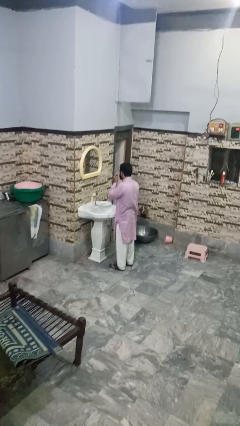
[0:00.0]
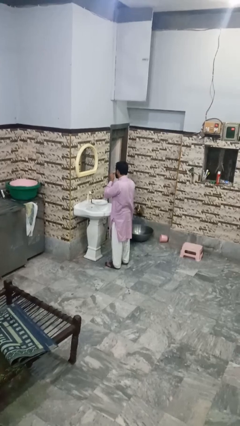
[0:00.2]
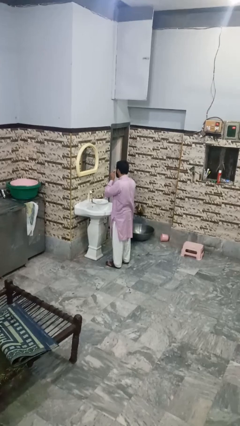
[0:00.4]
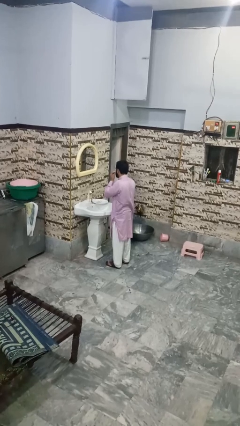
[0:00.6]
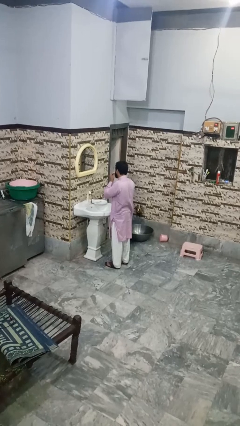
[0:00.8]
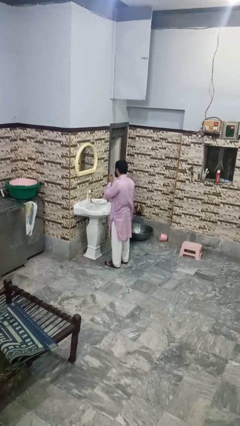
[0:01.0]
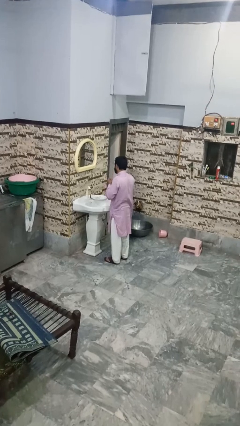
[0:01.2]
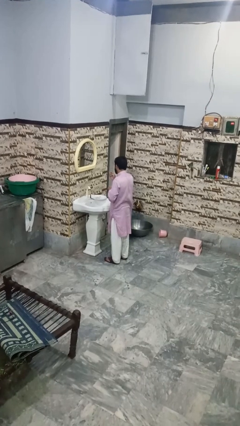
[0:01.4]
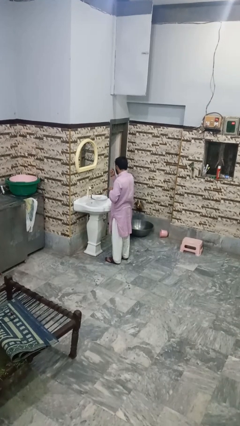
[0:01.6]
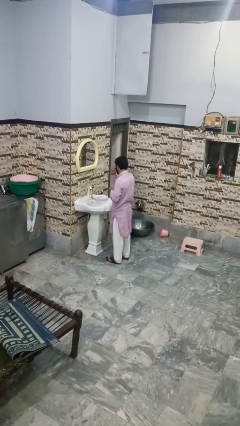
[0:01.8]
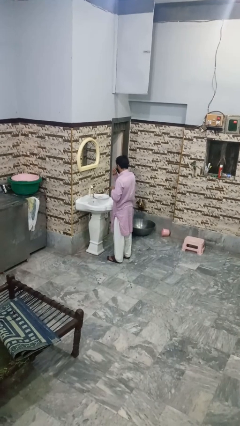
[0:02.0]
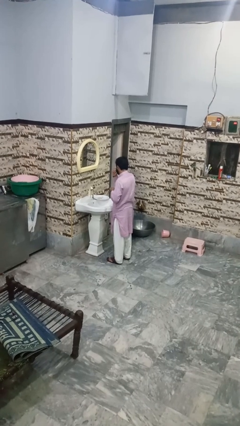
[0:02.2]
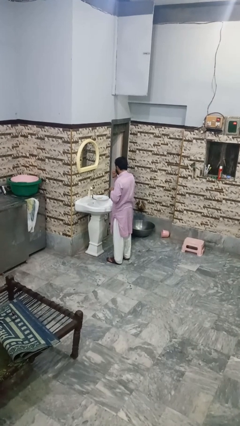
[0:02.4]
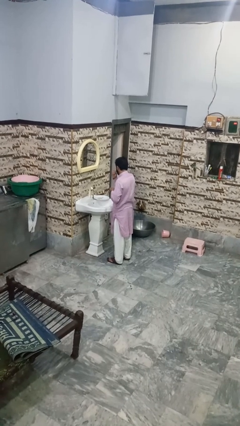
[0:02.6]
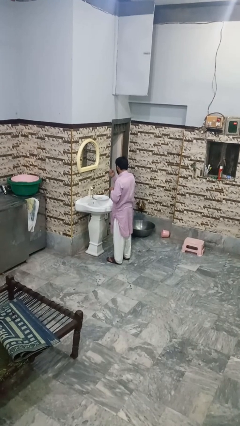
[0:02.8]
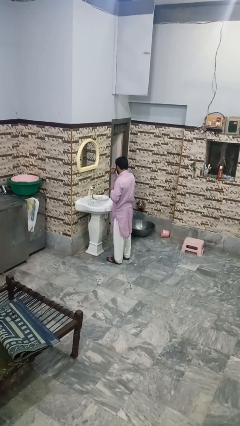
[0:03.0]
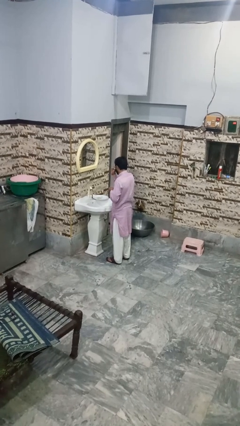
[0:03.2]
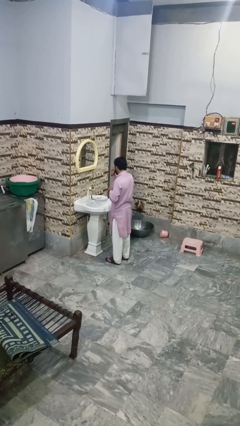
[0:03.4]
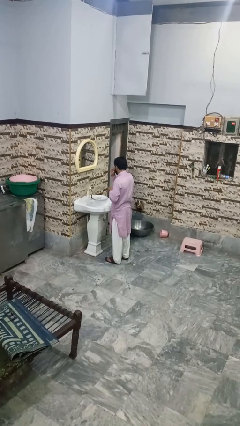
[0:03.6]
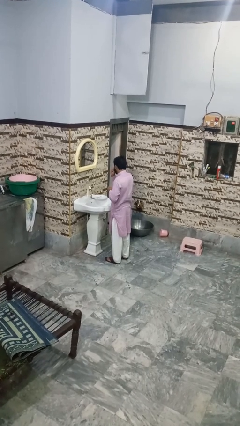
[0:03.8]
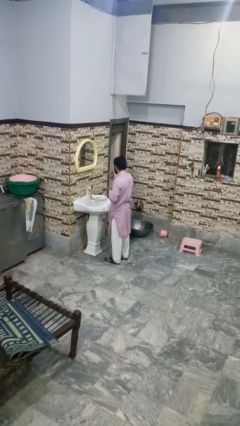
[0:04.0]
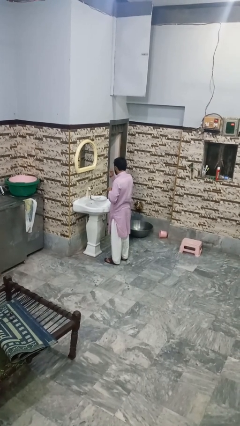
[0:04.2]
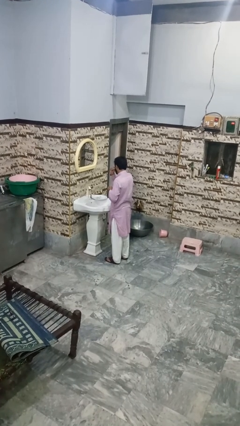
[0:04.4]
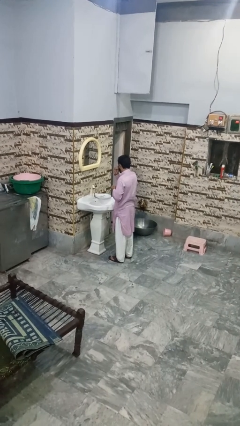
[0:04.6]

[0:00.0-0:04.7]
person shaves face

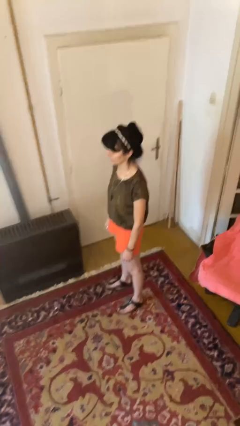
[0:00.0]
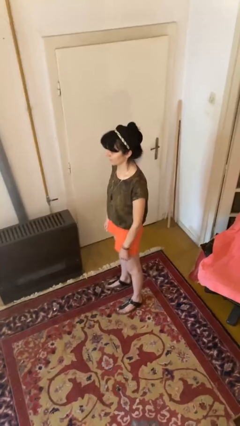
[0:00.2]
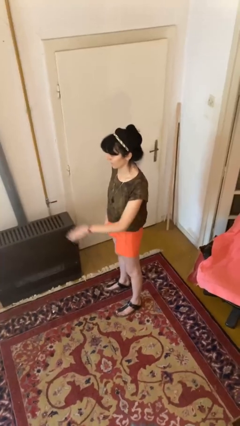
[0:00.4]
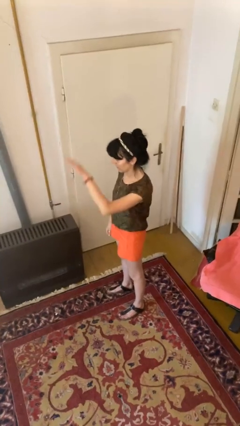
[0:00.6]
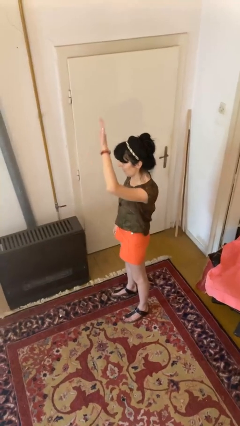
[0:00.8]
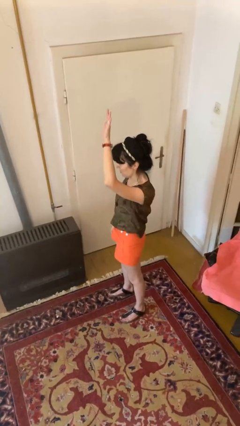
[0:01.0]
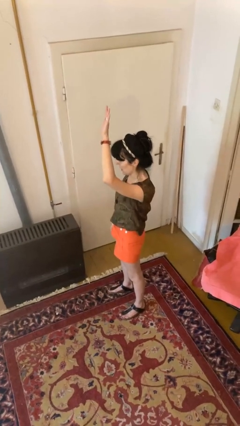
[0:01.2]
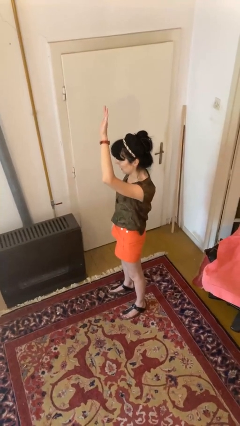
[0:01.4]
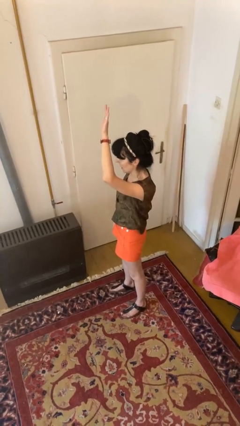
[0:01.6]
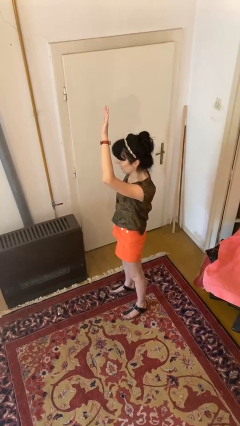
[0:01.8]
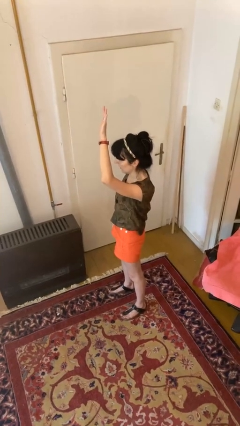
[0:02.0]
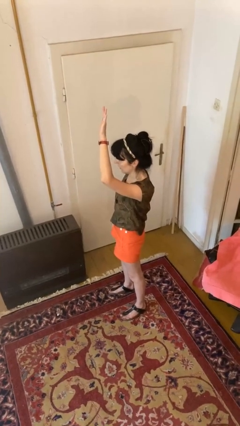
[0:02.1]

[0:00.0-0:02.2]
person gestures raise hand

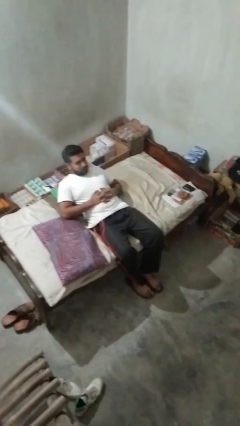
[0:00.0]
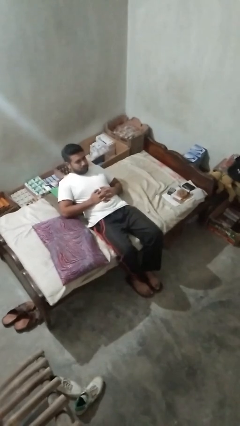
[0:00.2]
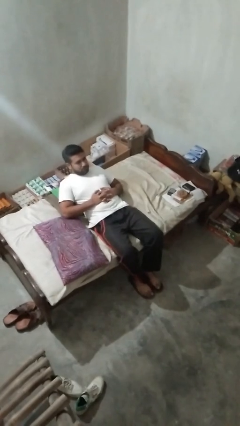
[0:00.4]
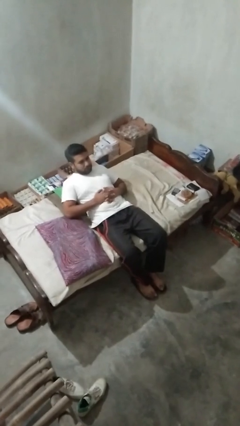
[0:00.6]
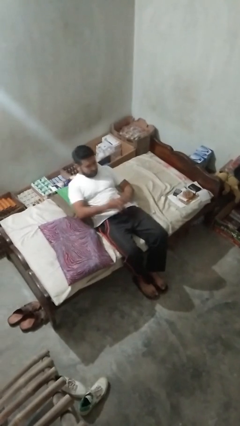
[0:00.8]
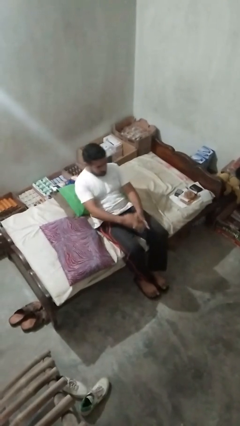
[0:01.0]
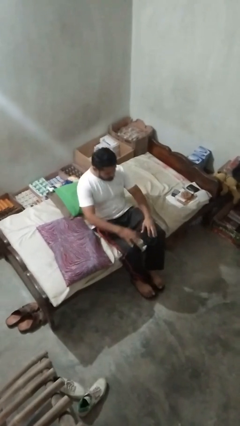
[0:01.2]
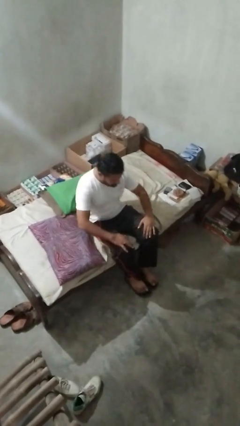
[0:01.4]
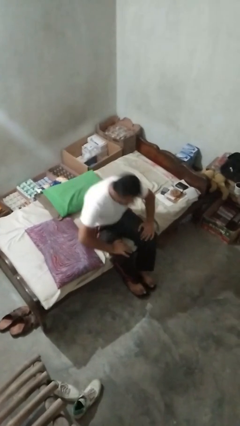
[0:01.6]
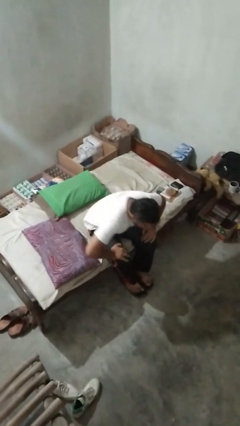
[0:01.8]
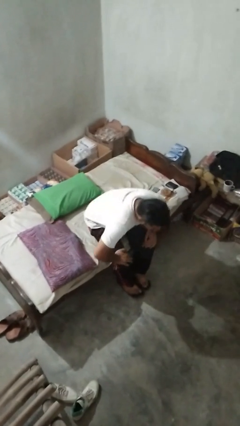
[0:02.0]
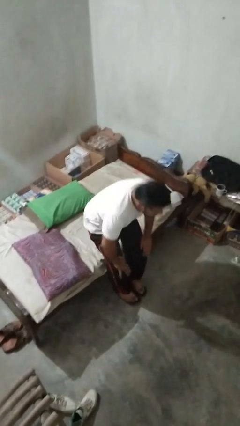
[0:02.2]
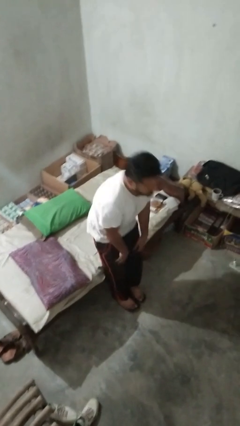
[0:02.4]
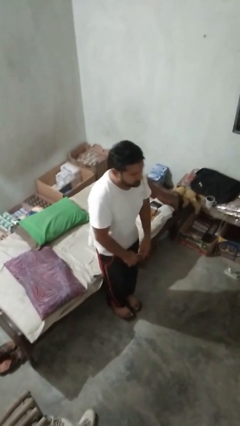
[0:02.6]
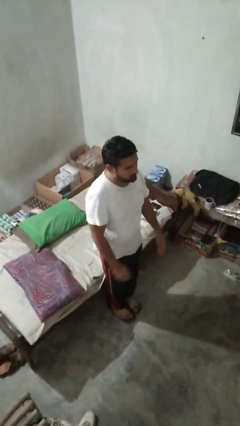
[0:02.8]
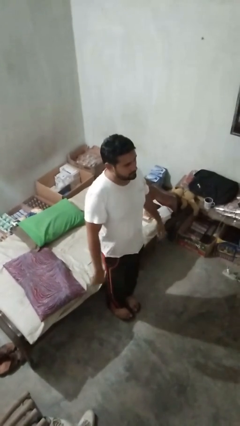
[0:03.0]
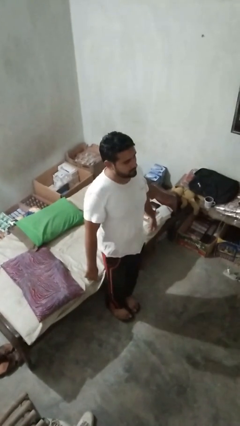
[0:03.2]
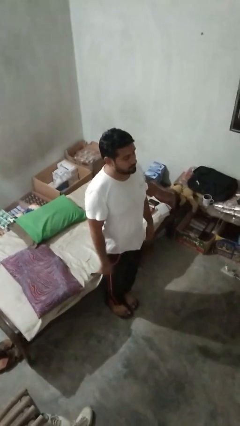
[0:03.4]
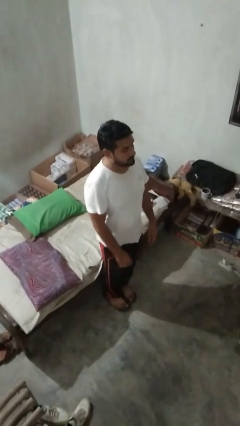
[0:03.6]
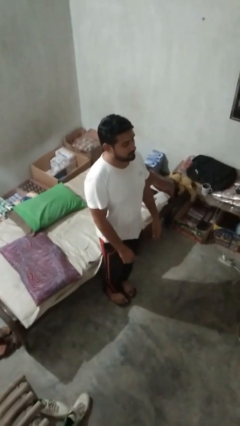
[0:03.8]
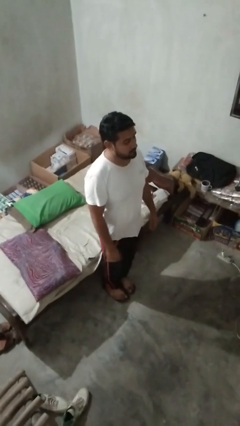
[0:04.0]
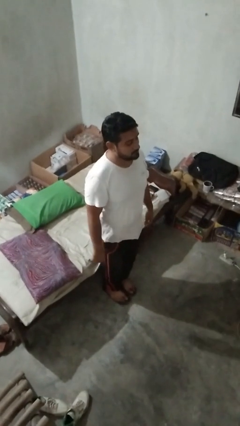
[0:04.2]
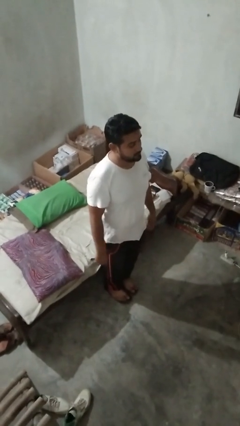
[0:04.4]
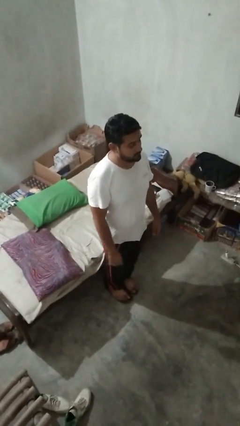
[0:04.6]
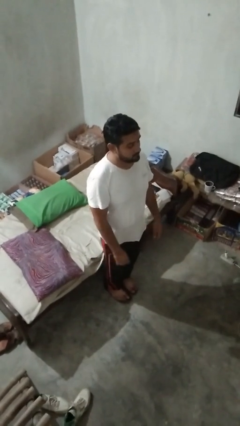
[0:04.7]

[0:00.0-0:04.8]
person stands up

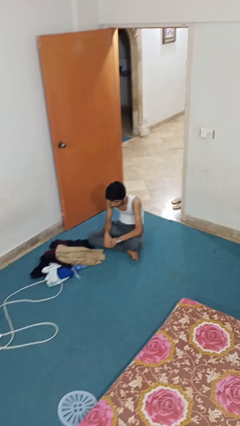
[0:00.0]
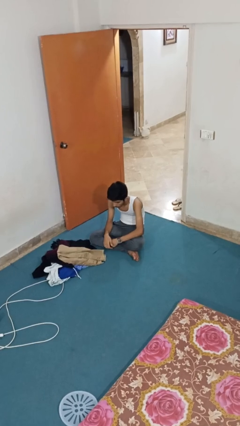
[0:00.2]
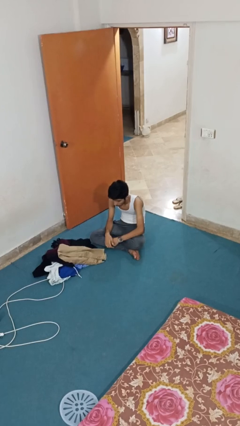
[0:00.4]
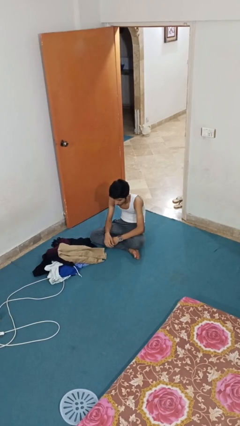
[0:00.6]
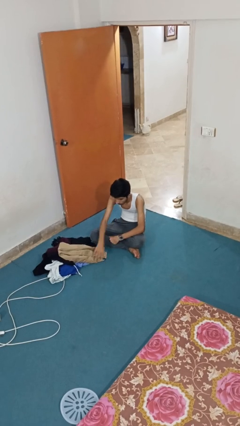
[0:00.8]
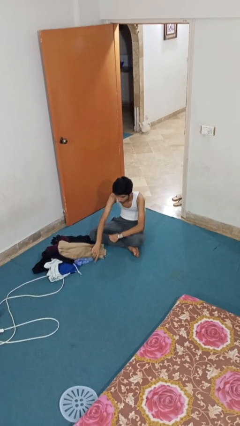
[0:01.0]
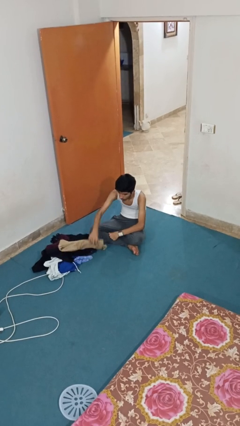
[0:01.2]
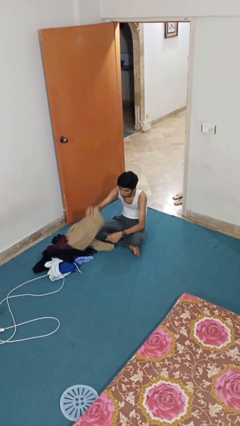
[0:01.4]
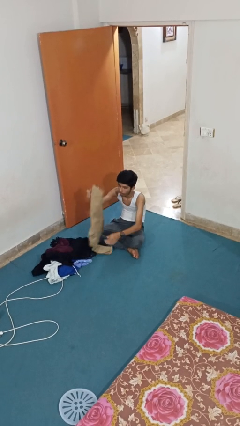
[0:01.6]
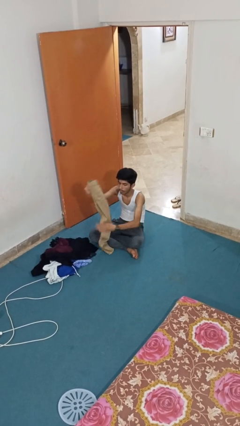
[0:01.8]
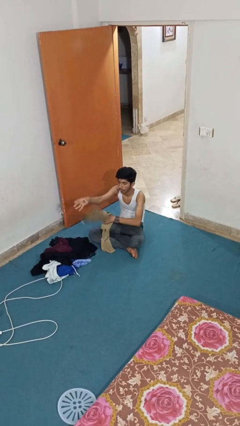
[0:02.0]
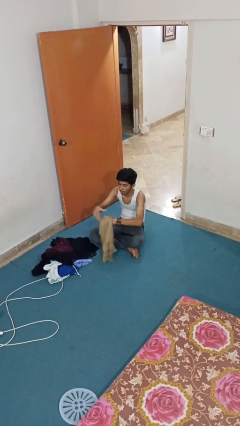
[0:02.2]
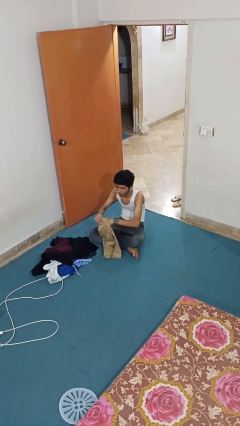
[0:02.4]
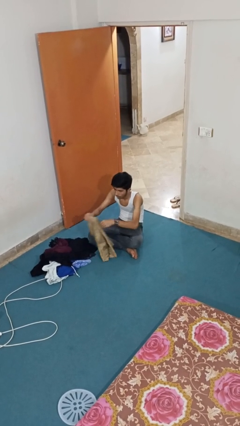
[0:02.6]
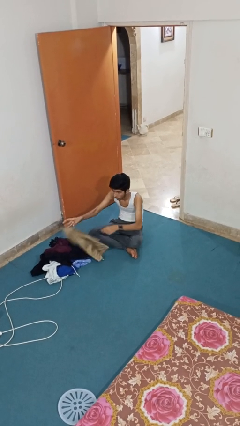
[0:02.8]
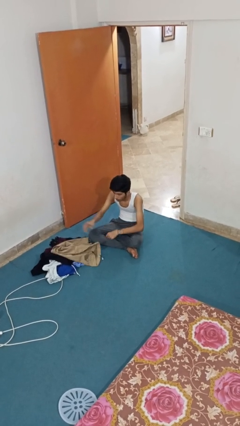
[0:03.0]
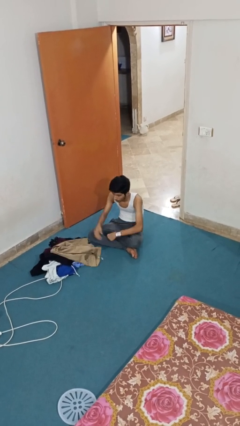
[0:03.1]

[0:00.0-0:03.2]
person folds pants

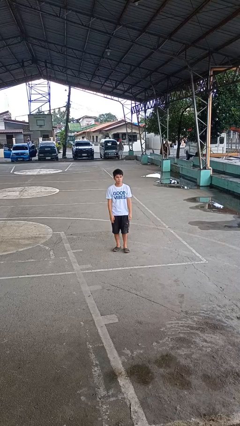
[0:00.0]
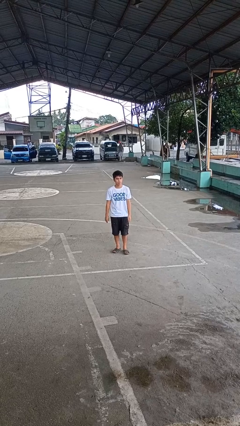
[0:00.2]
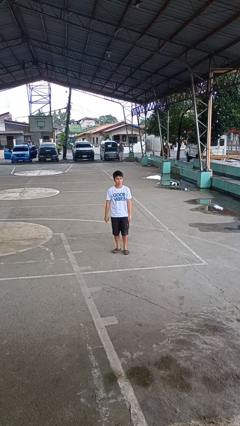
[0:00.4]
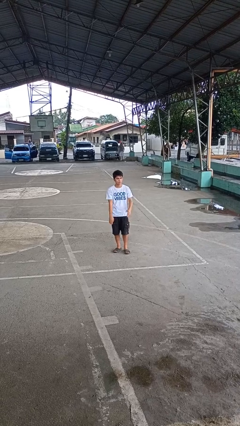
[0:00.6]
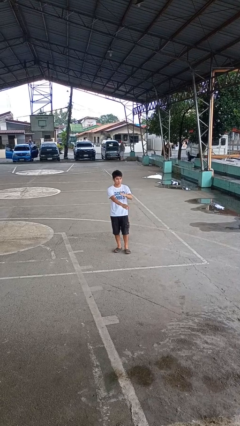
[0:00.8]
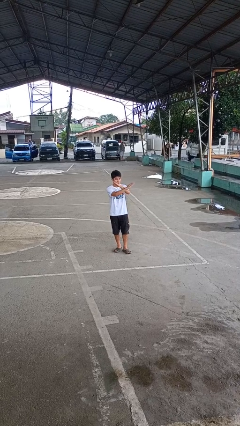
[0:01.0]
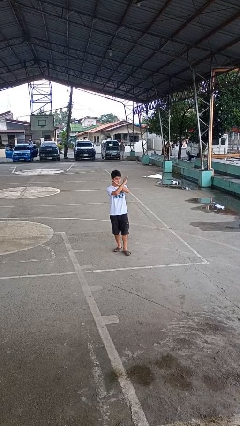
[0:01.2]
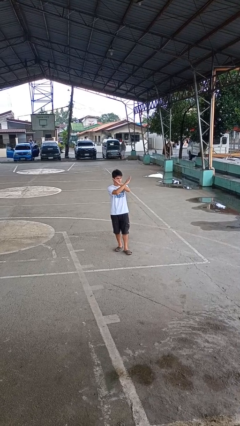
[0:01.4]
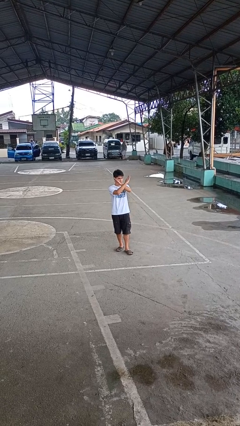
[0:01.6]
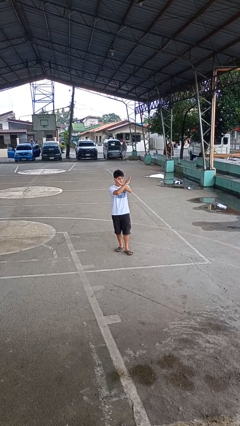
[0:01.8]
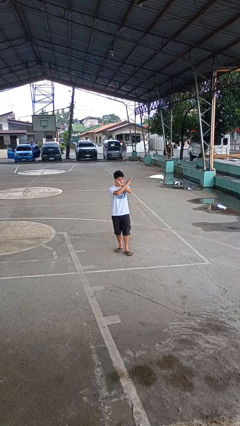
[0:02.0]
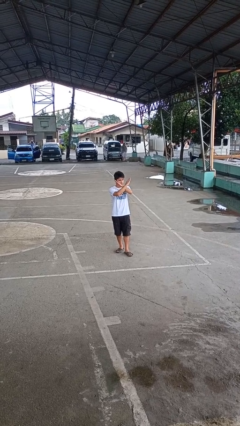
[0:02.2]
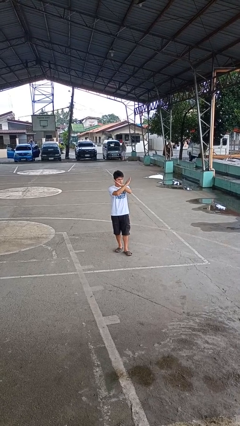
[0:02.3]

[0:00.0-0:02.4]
person gestures arms x

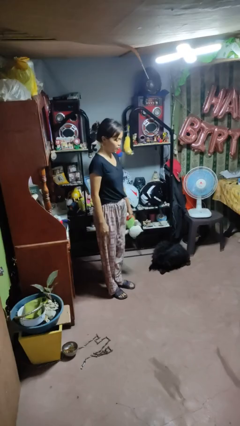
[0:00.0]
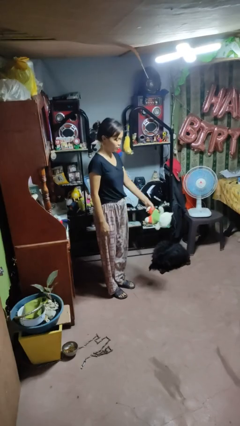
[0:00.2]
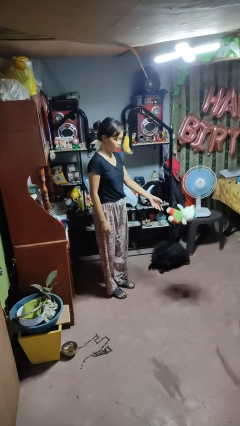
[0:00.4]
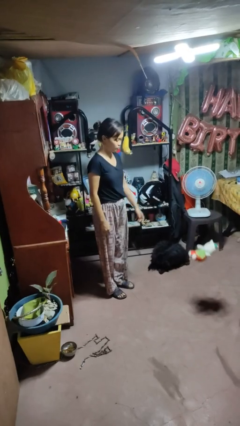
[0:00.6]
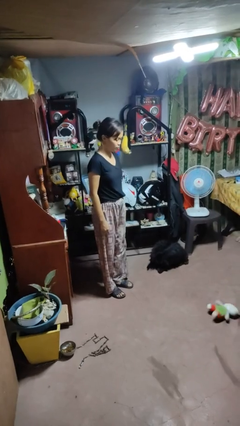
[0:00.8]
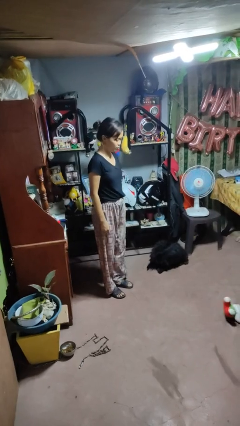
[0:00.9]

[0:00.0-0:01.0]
person throws object to ground
